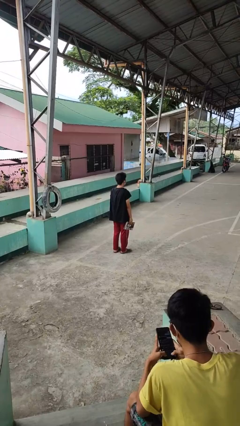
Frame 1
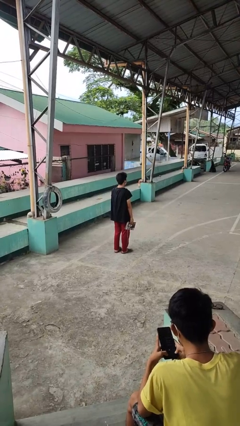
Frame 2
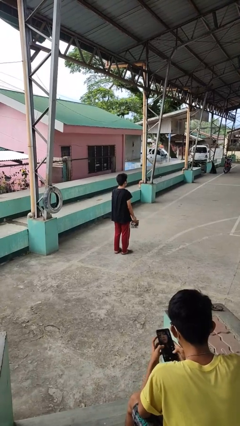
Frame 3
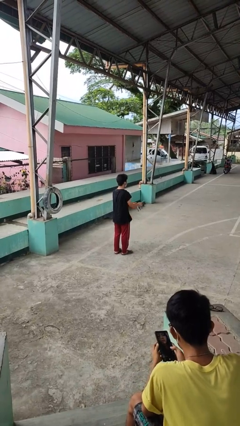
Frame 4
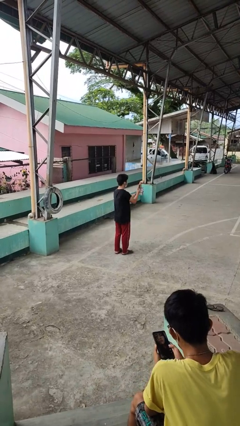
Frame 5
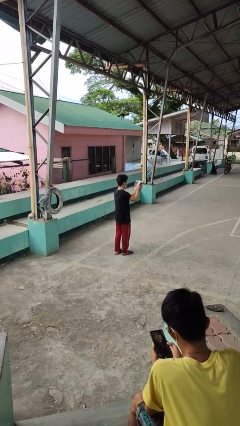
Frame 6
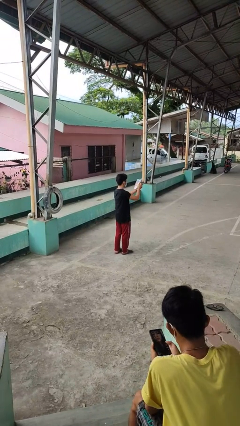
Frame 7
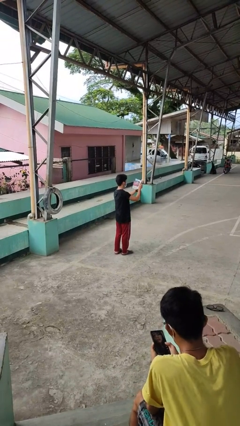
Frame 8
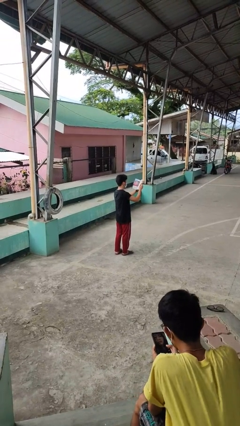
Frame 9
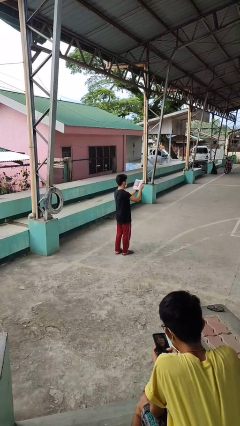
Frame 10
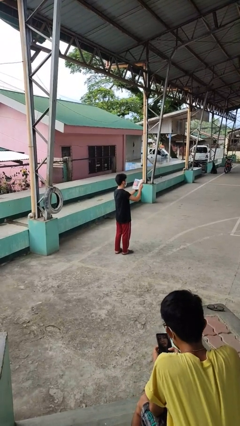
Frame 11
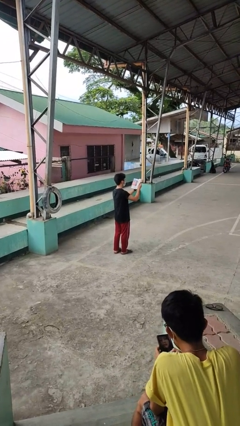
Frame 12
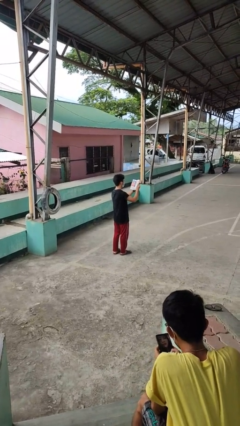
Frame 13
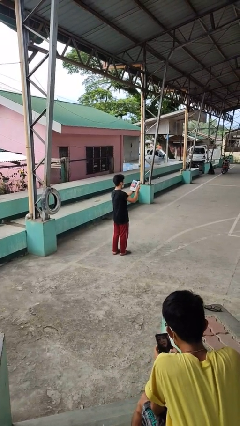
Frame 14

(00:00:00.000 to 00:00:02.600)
person reads magazine

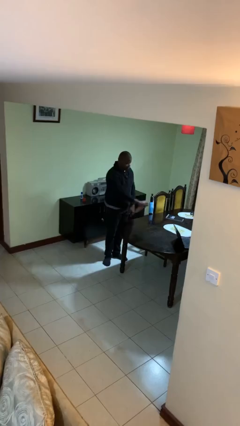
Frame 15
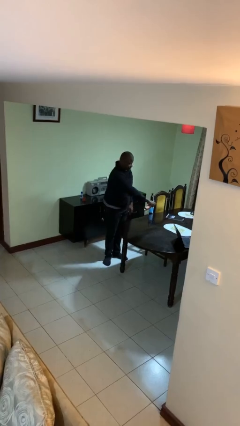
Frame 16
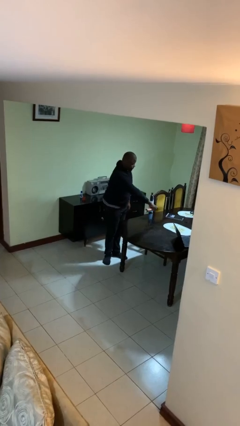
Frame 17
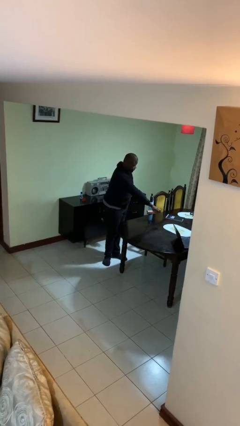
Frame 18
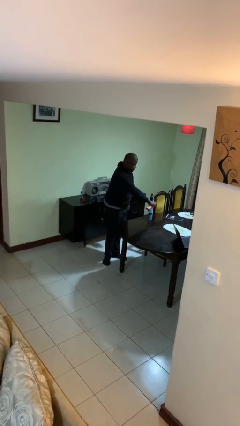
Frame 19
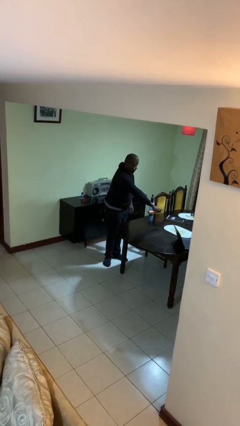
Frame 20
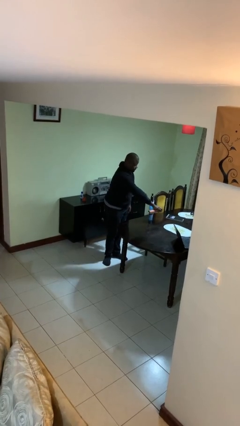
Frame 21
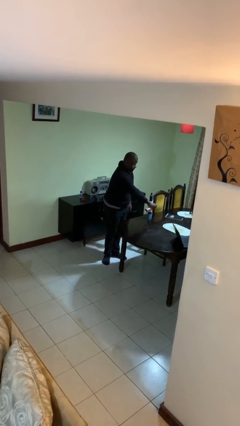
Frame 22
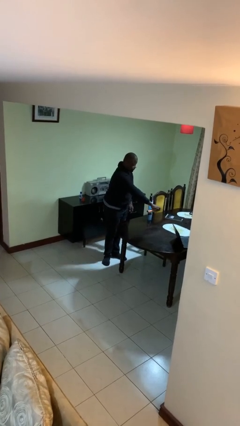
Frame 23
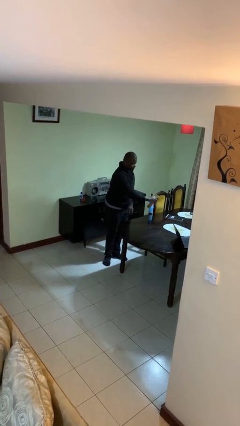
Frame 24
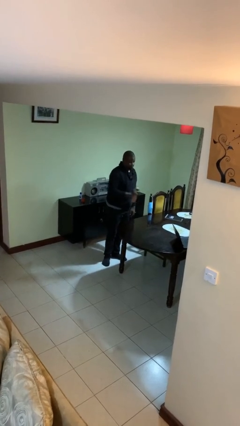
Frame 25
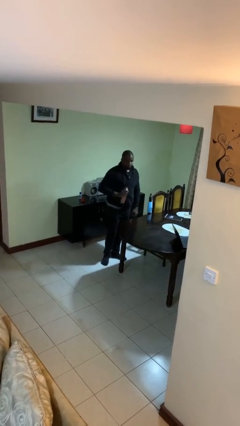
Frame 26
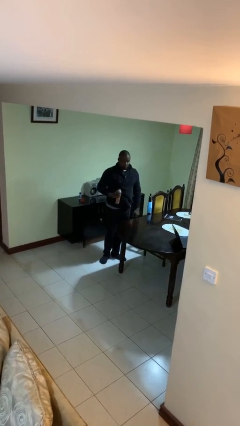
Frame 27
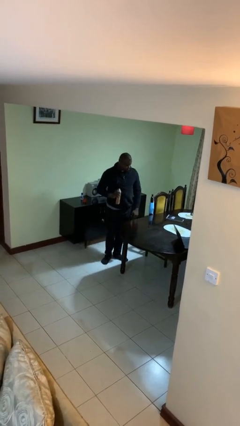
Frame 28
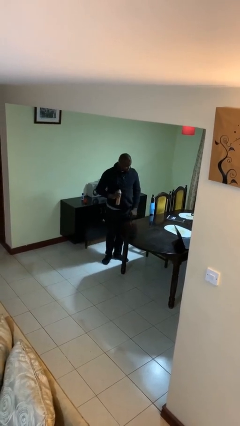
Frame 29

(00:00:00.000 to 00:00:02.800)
person sprays from bottle

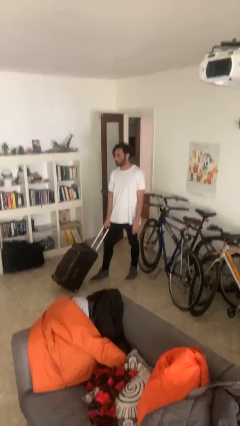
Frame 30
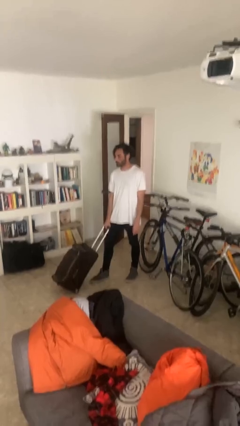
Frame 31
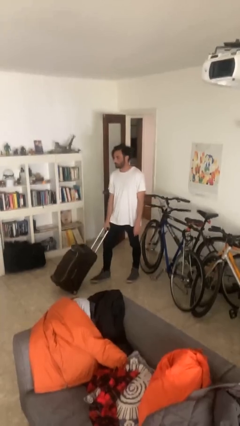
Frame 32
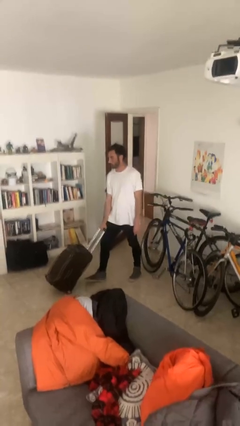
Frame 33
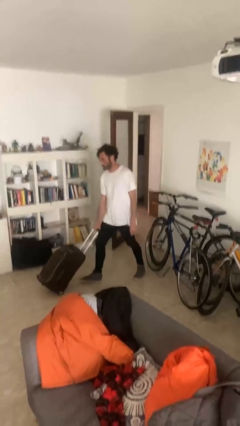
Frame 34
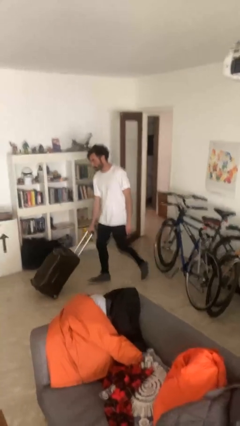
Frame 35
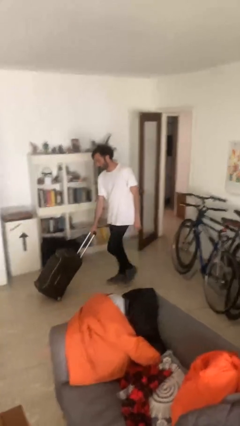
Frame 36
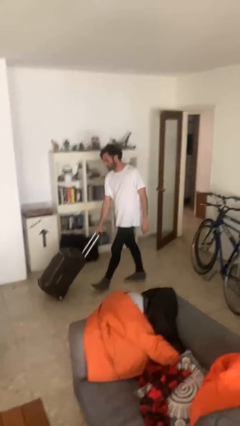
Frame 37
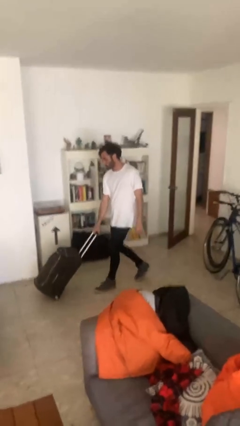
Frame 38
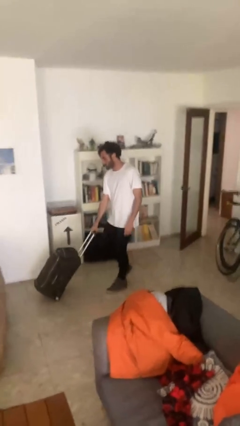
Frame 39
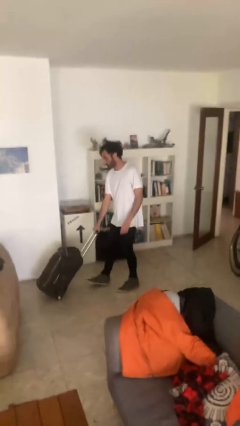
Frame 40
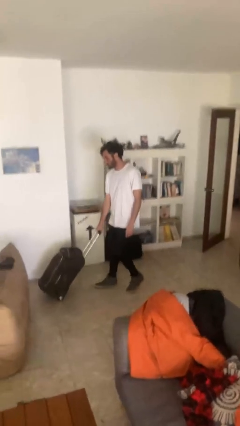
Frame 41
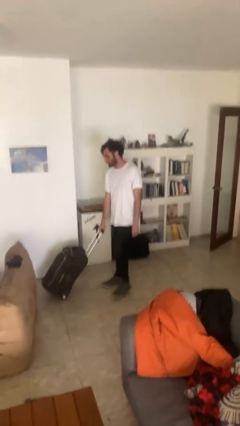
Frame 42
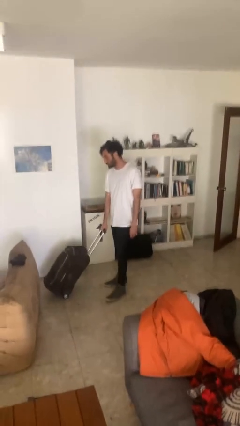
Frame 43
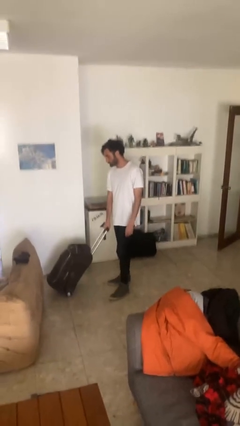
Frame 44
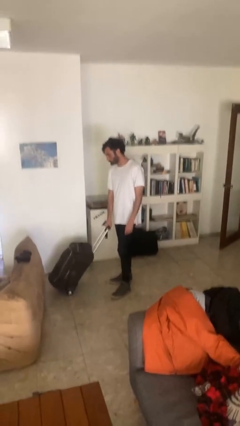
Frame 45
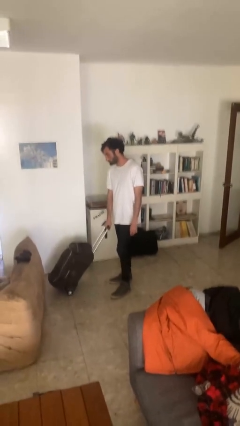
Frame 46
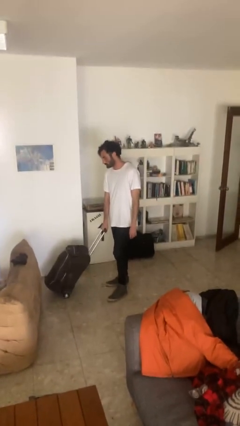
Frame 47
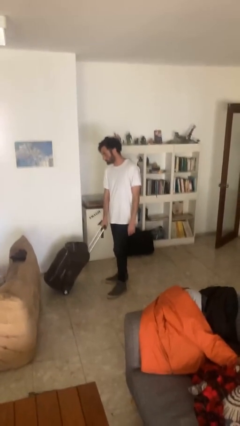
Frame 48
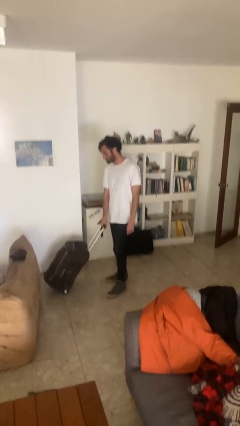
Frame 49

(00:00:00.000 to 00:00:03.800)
person pushes wheeled cart

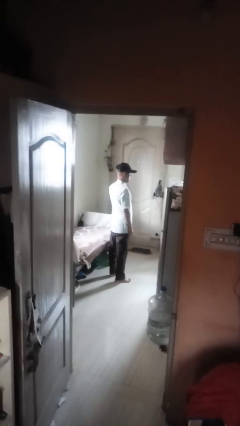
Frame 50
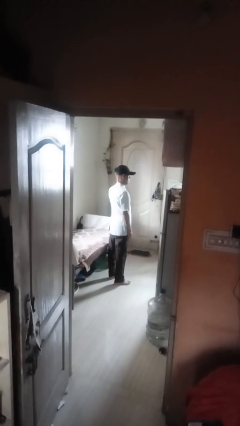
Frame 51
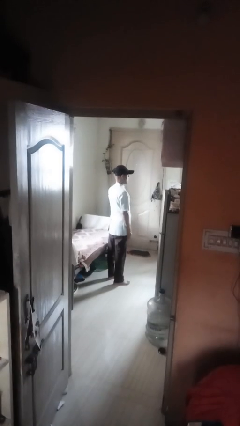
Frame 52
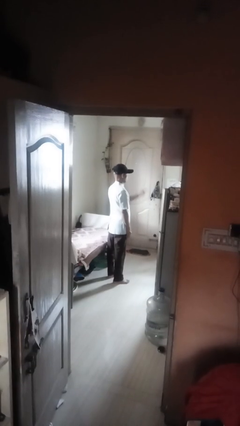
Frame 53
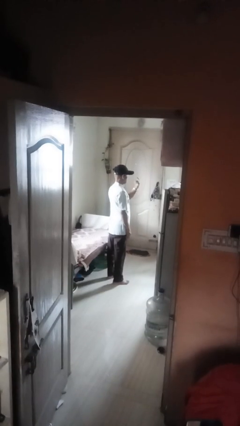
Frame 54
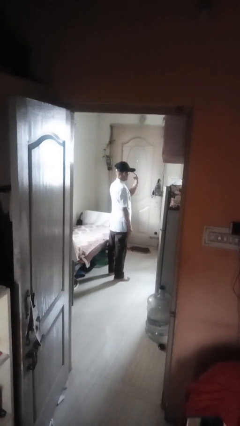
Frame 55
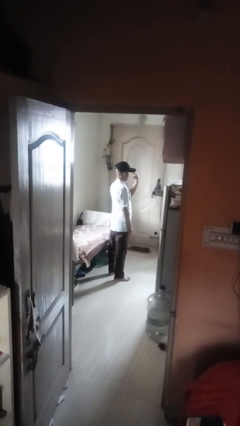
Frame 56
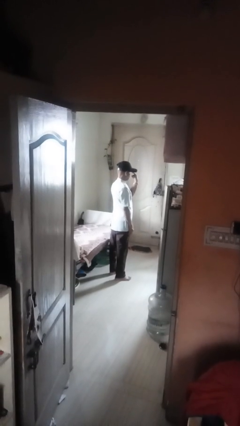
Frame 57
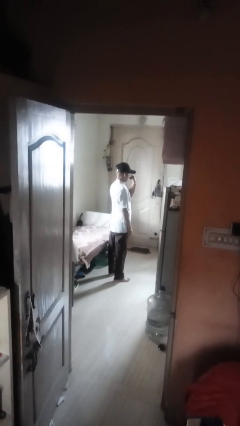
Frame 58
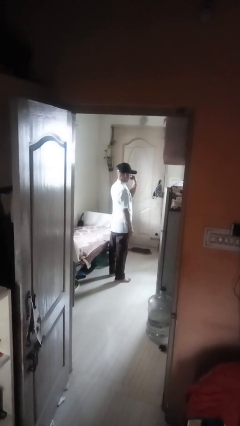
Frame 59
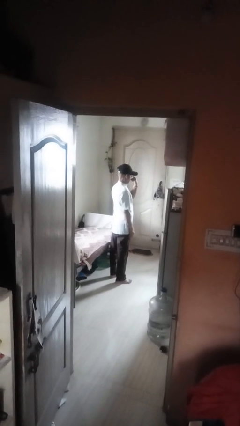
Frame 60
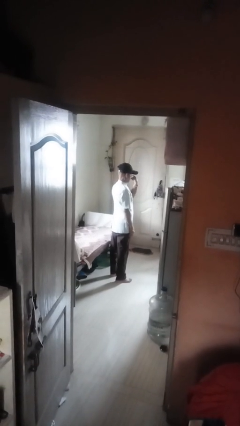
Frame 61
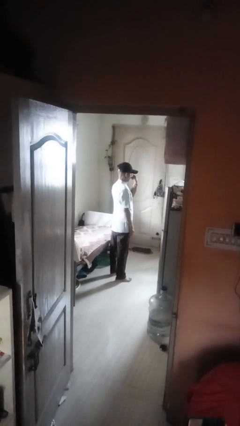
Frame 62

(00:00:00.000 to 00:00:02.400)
person gestures watch closely

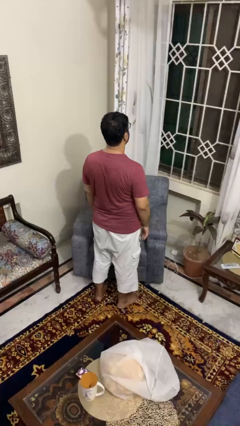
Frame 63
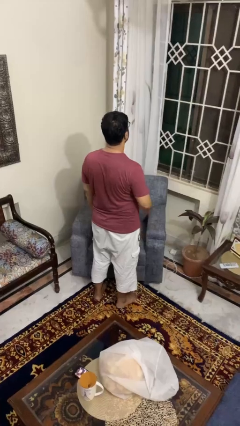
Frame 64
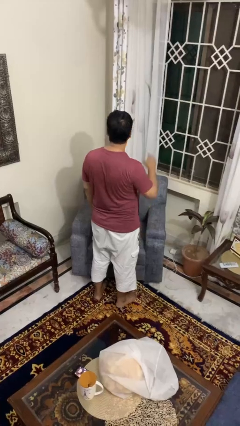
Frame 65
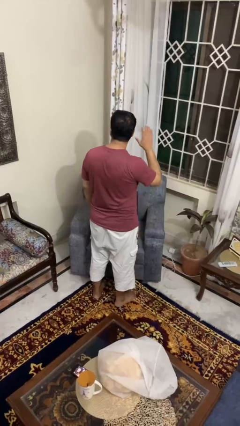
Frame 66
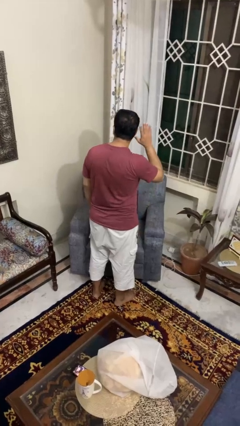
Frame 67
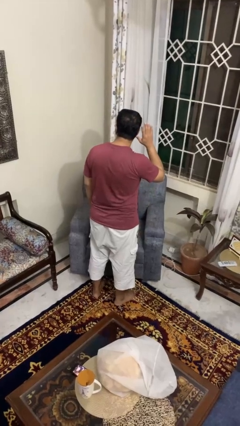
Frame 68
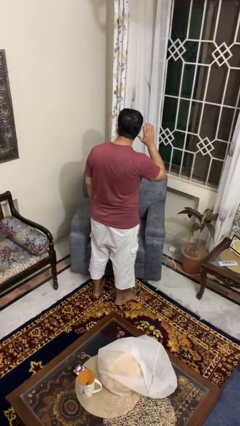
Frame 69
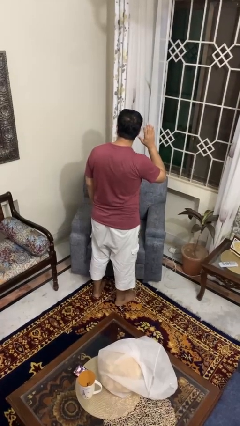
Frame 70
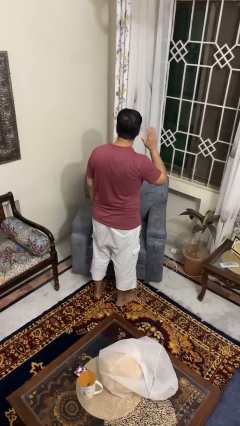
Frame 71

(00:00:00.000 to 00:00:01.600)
person gestures listen closely

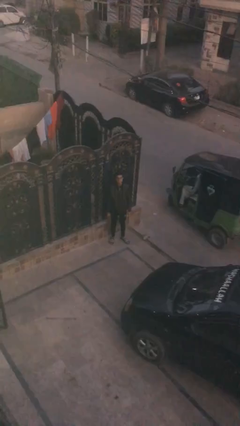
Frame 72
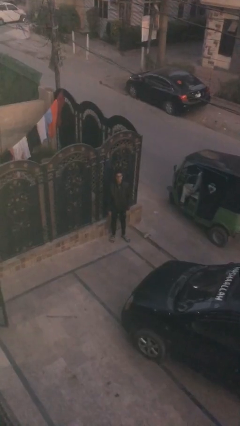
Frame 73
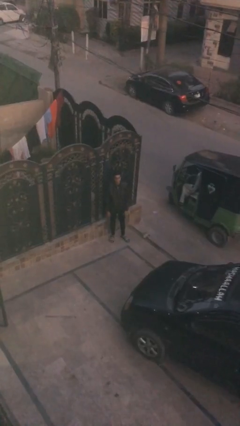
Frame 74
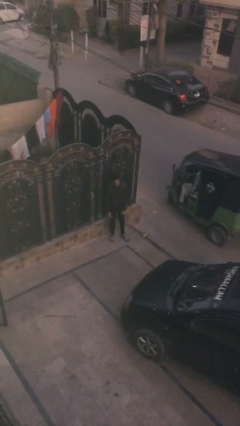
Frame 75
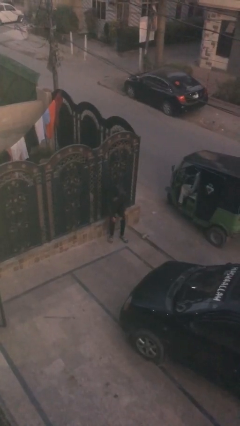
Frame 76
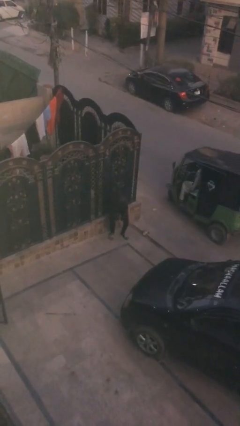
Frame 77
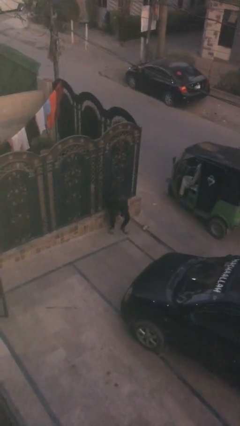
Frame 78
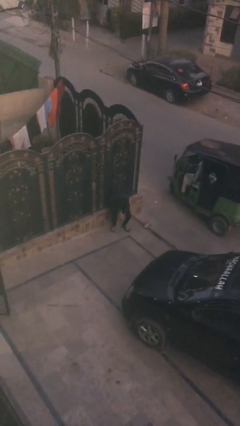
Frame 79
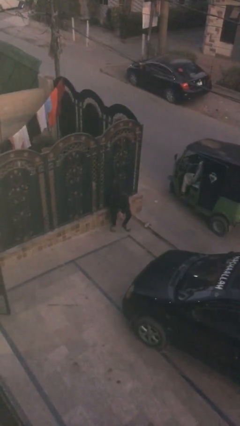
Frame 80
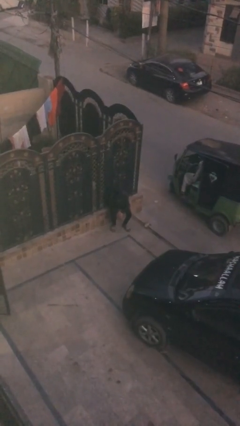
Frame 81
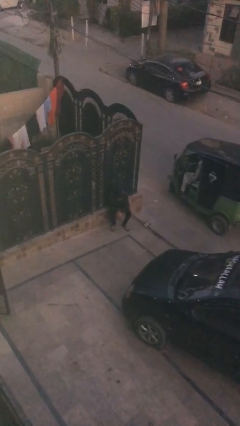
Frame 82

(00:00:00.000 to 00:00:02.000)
person sits down

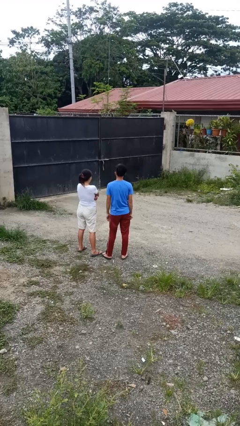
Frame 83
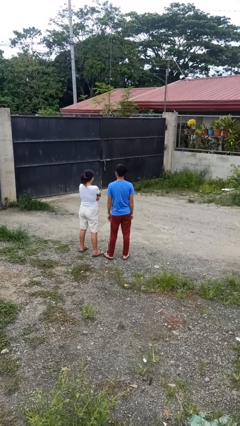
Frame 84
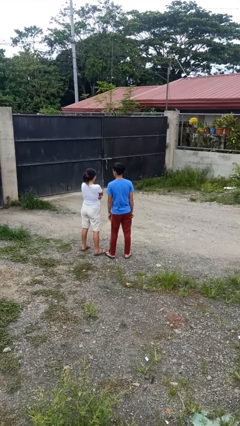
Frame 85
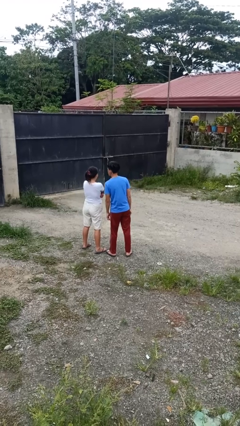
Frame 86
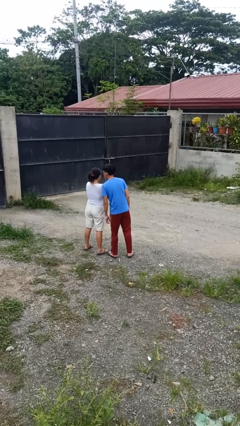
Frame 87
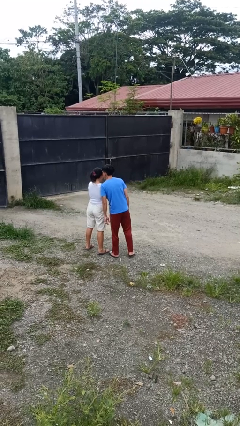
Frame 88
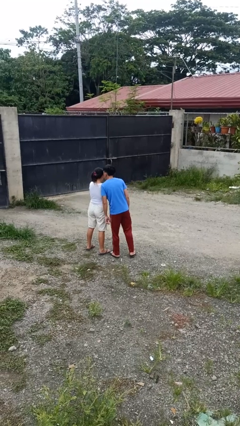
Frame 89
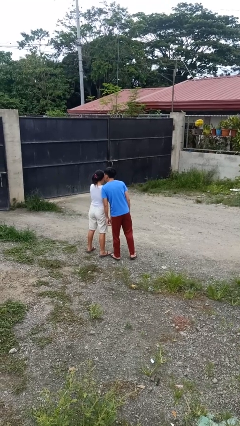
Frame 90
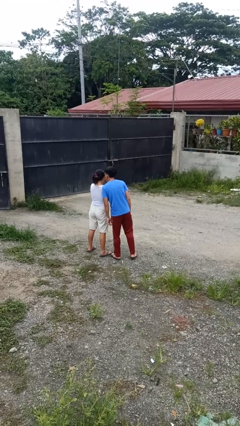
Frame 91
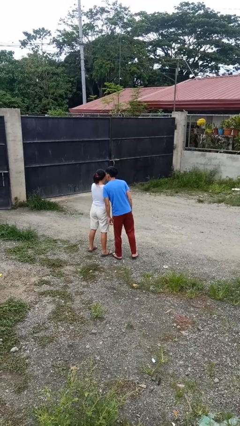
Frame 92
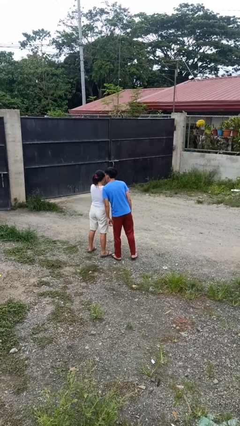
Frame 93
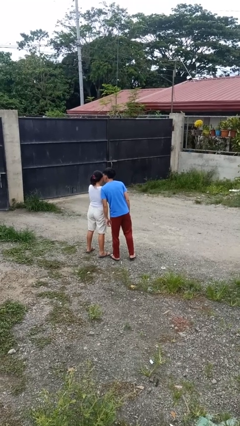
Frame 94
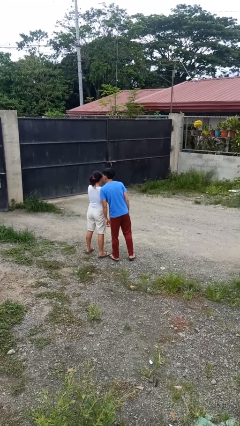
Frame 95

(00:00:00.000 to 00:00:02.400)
person kisses cheek of person
